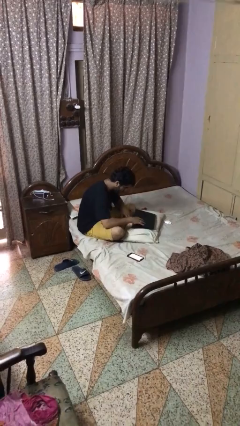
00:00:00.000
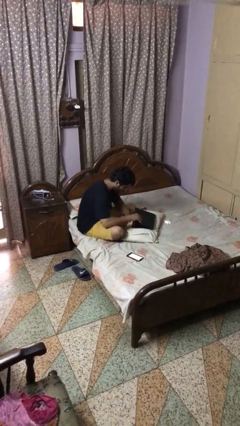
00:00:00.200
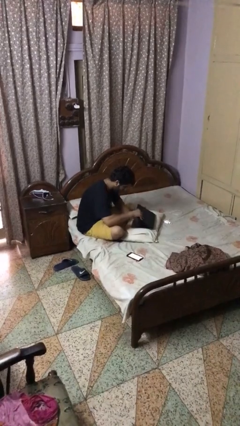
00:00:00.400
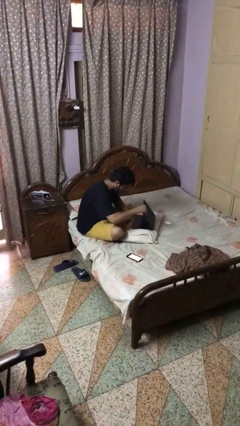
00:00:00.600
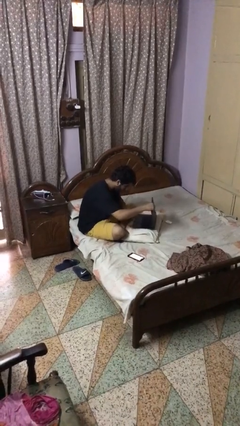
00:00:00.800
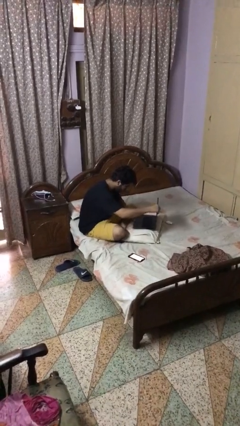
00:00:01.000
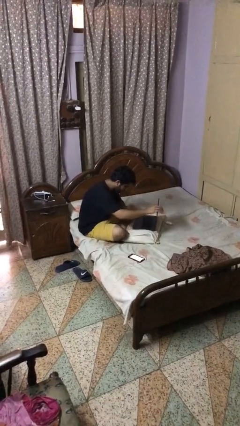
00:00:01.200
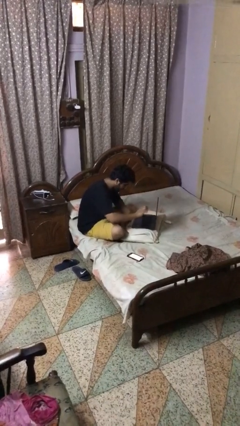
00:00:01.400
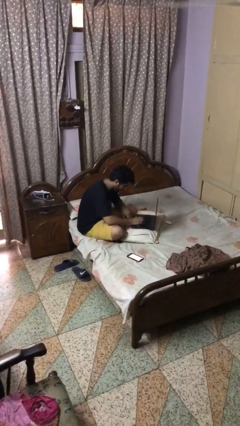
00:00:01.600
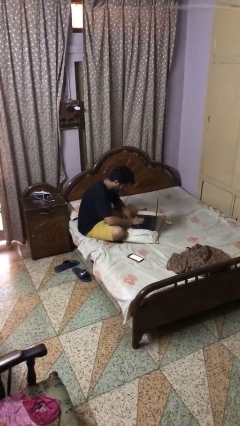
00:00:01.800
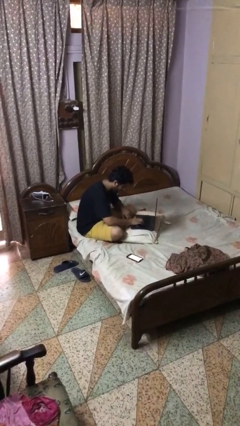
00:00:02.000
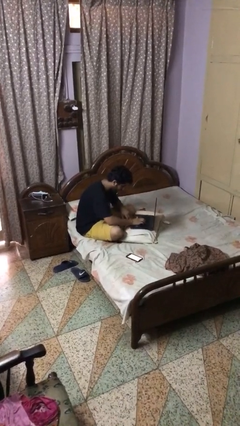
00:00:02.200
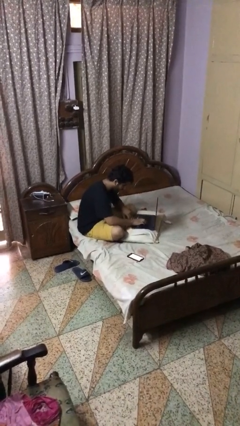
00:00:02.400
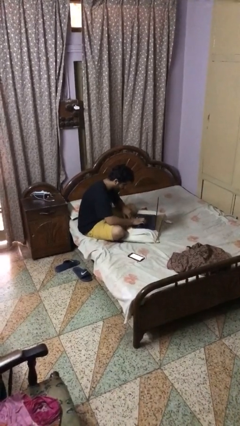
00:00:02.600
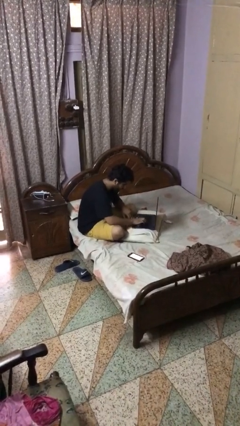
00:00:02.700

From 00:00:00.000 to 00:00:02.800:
person opens laptop

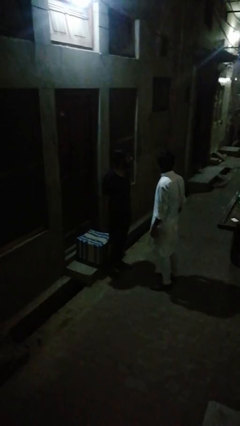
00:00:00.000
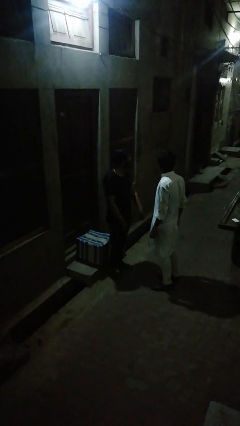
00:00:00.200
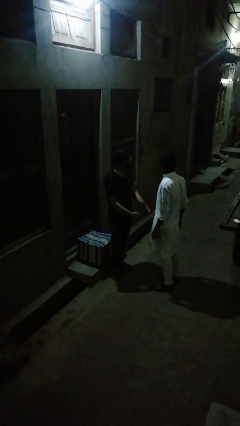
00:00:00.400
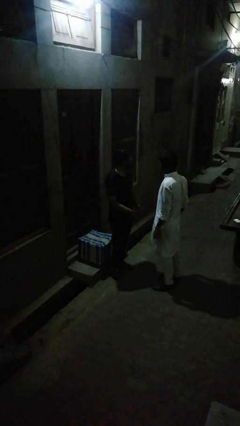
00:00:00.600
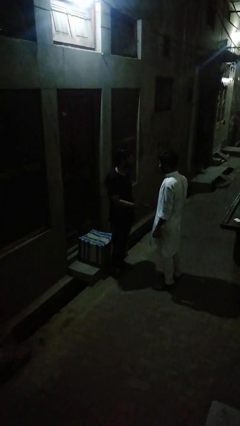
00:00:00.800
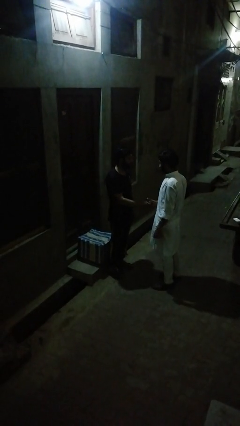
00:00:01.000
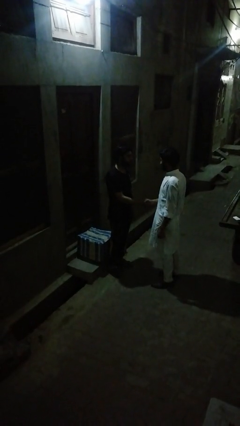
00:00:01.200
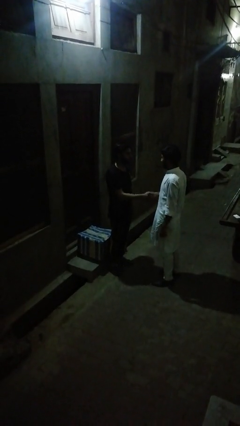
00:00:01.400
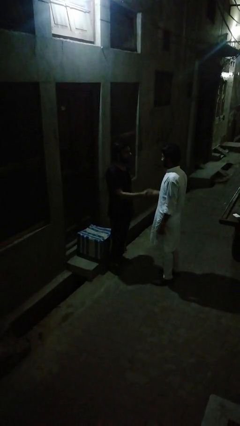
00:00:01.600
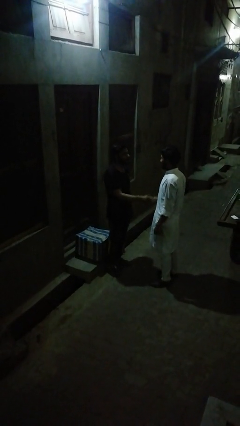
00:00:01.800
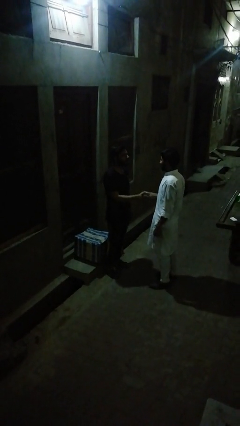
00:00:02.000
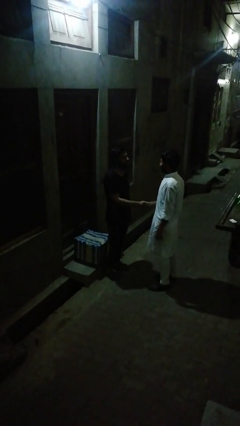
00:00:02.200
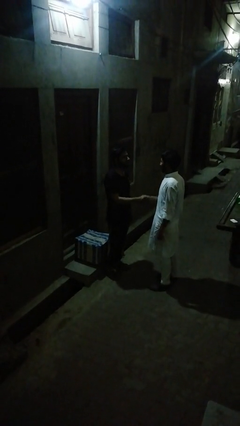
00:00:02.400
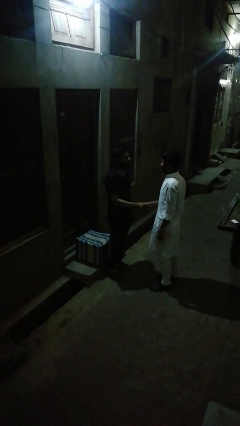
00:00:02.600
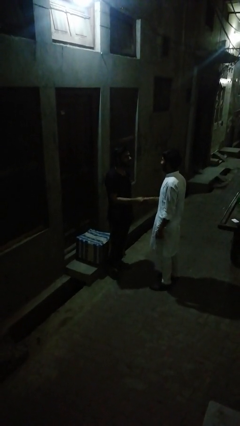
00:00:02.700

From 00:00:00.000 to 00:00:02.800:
person highfives hand

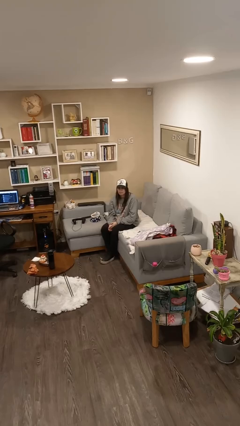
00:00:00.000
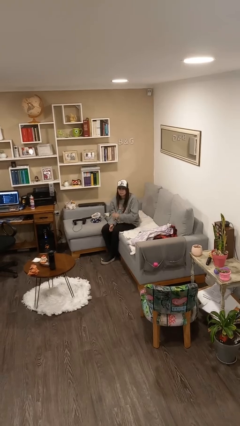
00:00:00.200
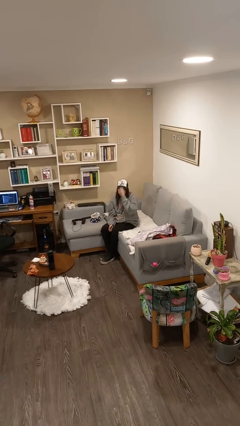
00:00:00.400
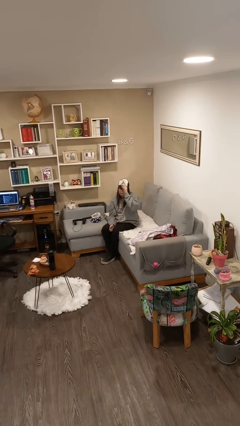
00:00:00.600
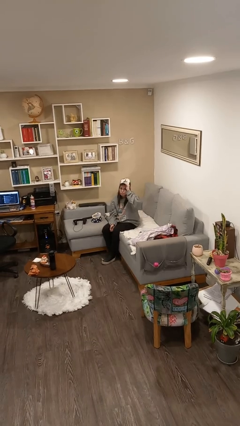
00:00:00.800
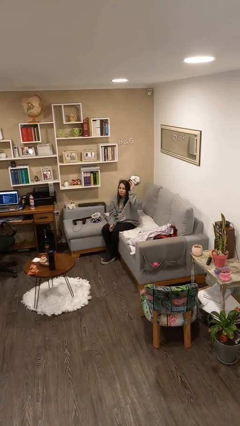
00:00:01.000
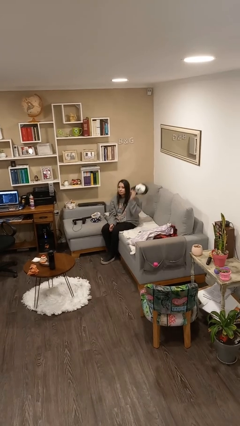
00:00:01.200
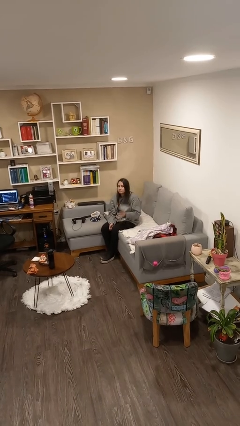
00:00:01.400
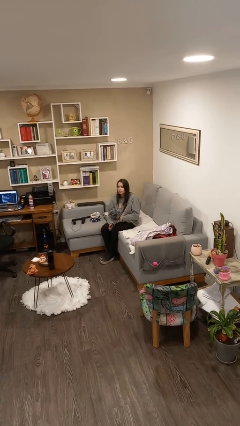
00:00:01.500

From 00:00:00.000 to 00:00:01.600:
person takes off hat

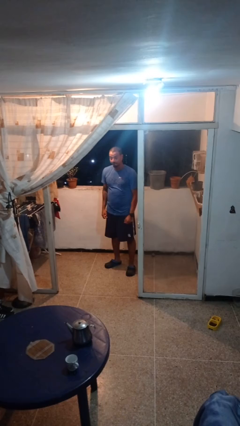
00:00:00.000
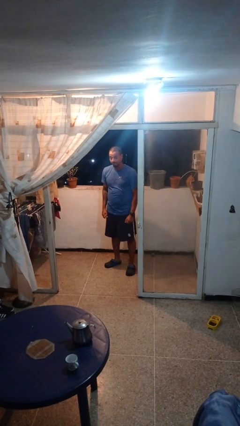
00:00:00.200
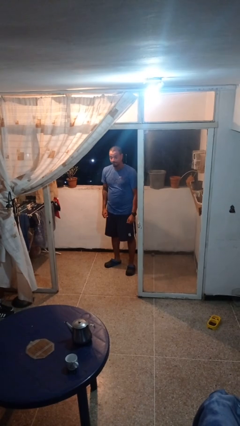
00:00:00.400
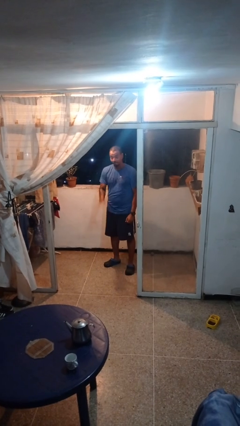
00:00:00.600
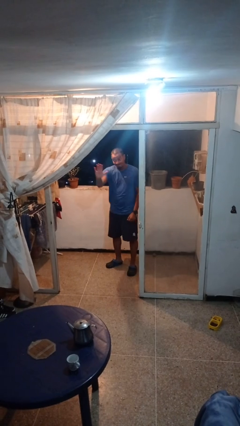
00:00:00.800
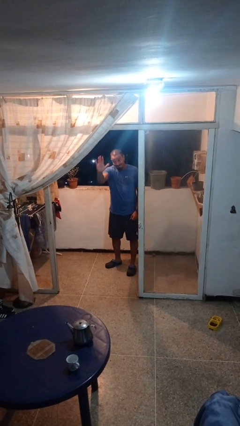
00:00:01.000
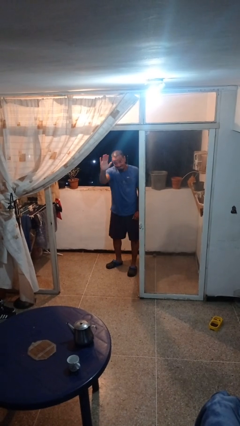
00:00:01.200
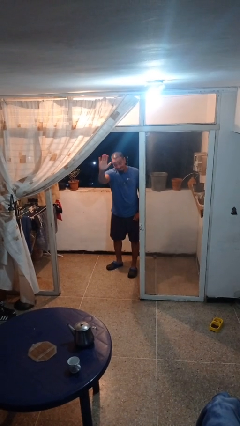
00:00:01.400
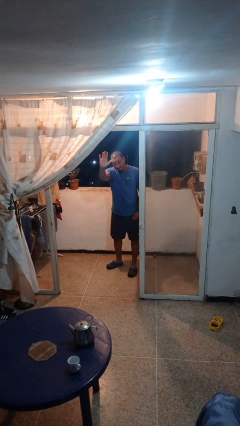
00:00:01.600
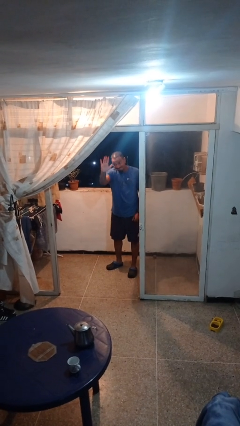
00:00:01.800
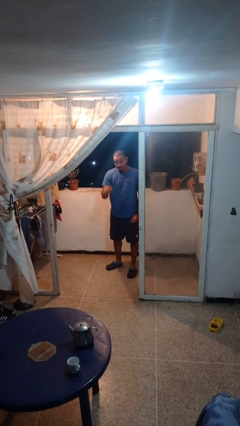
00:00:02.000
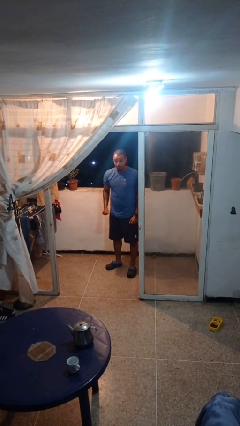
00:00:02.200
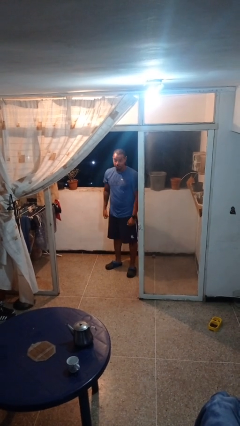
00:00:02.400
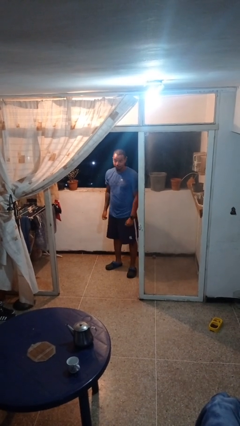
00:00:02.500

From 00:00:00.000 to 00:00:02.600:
person gestures stop

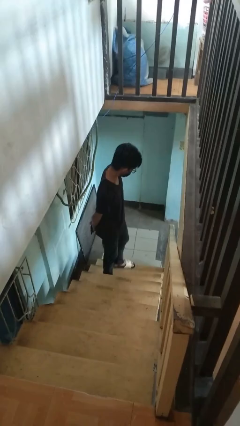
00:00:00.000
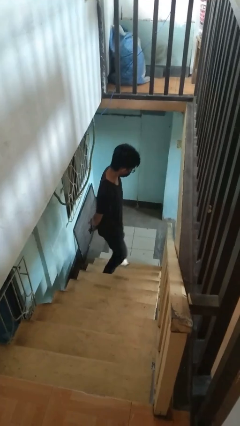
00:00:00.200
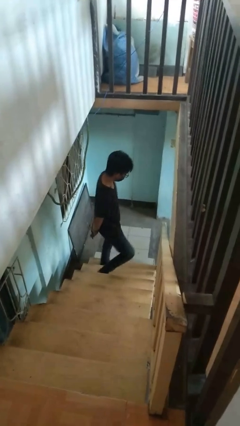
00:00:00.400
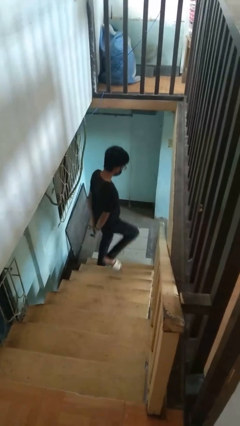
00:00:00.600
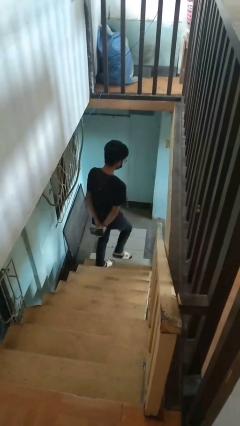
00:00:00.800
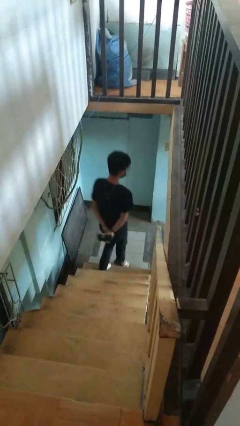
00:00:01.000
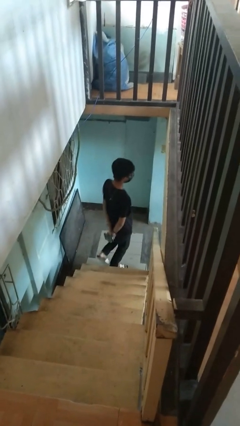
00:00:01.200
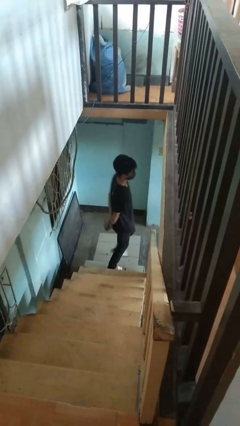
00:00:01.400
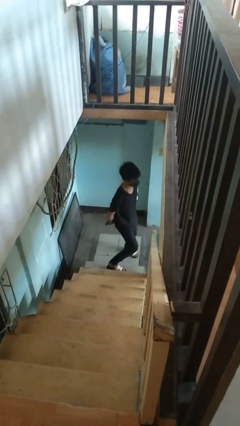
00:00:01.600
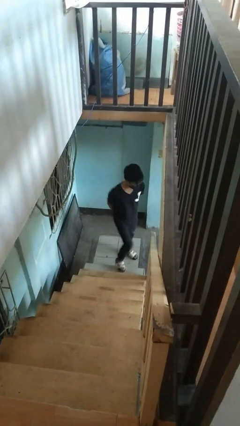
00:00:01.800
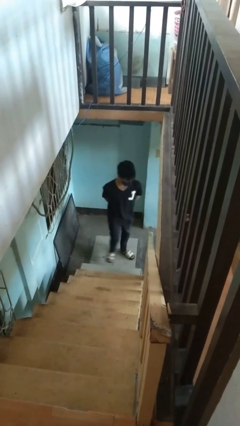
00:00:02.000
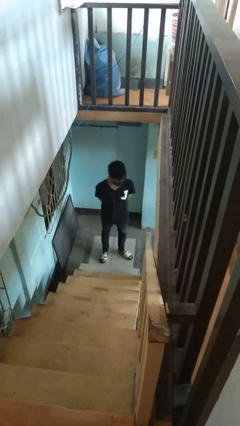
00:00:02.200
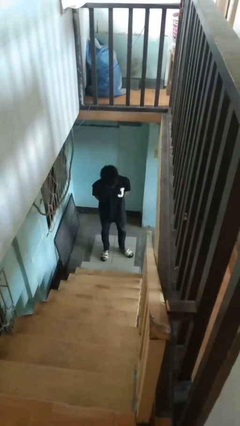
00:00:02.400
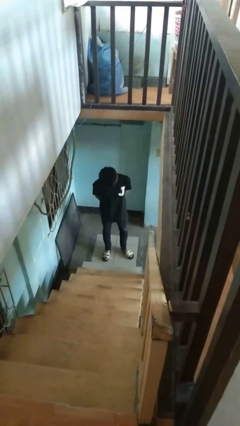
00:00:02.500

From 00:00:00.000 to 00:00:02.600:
person climbs down ladder

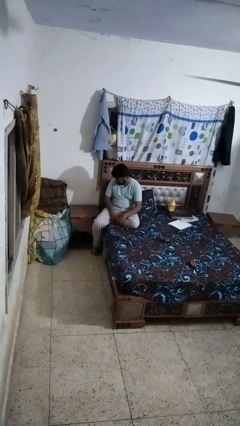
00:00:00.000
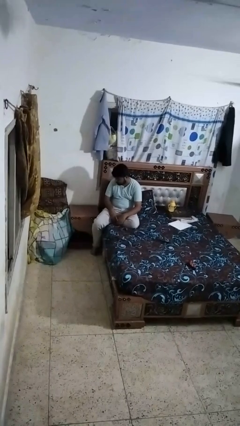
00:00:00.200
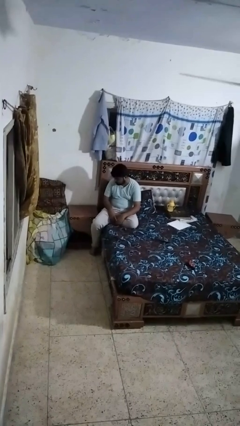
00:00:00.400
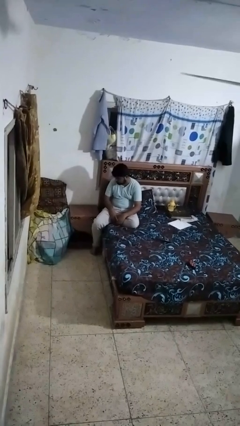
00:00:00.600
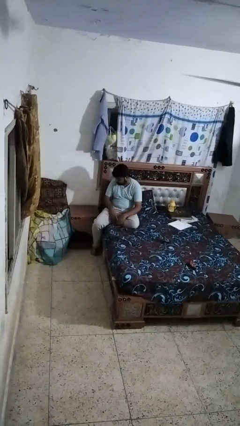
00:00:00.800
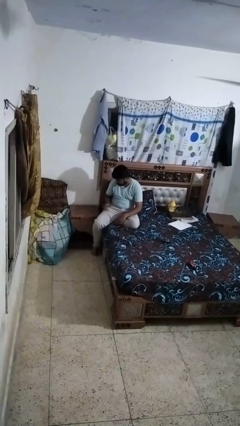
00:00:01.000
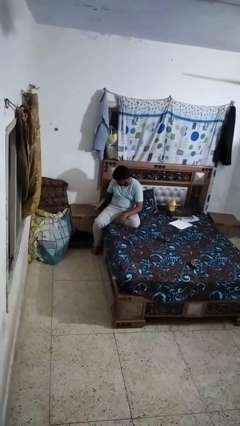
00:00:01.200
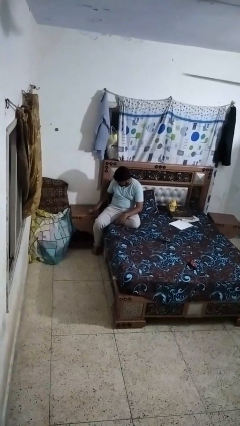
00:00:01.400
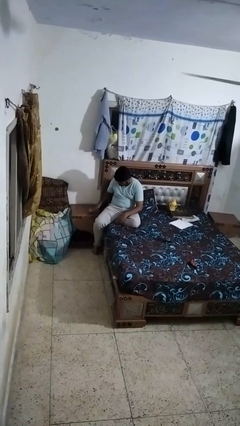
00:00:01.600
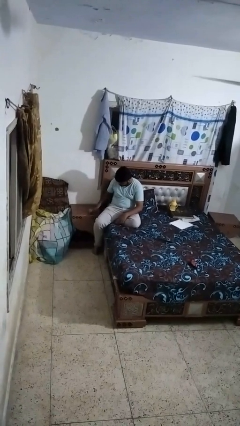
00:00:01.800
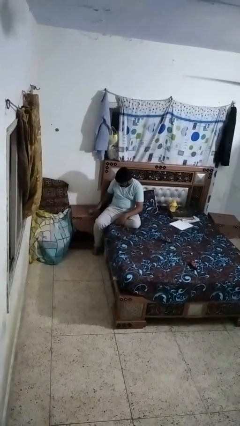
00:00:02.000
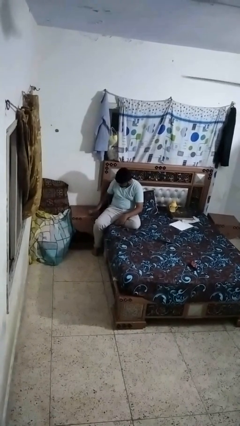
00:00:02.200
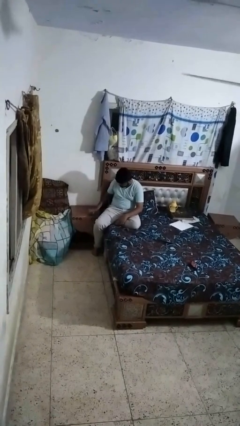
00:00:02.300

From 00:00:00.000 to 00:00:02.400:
person taps object with finger

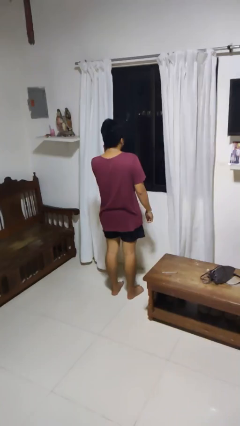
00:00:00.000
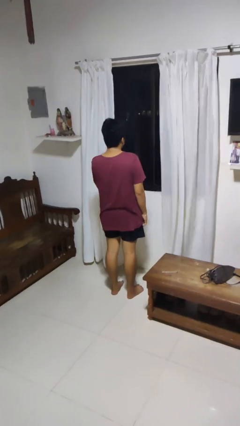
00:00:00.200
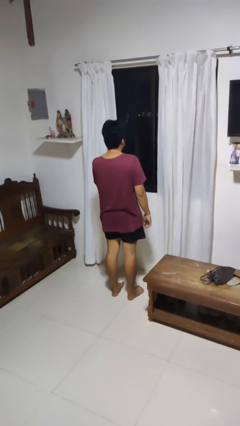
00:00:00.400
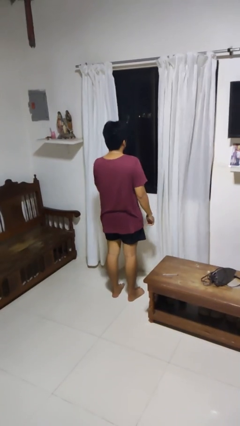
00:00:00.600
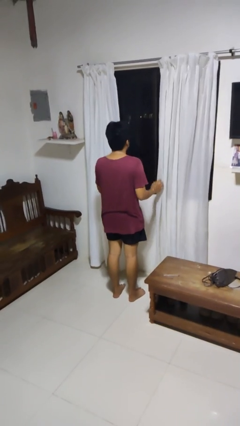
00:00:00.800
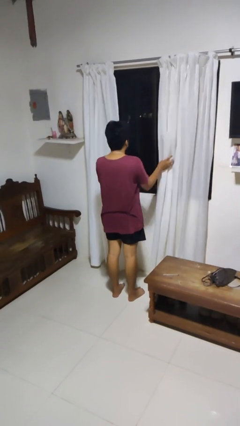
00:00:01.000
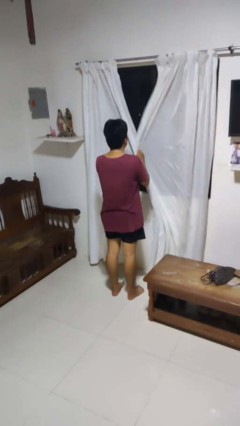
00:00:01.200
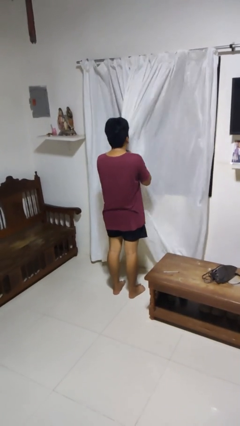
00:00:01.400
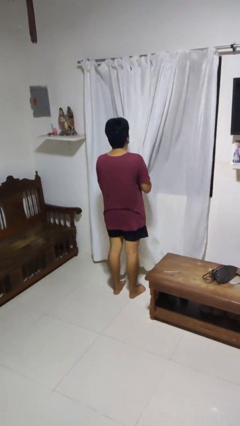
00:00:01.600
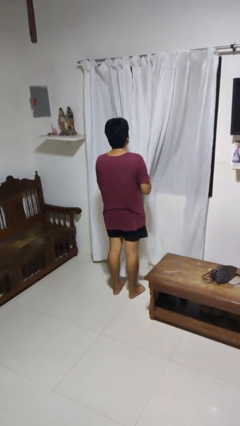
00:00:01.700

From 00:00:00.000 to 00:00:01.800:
person closes curtains

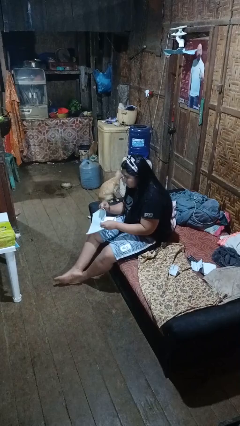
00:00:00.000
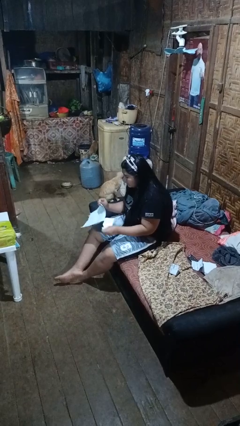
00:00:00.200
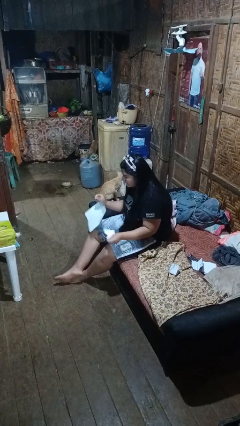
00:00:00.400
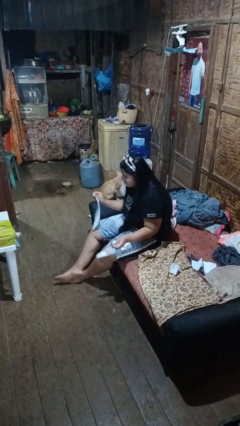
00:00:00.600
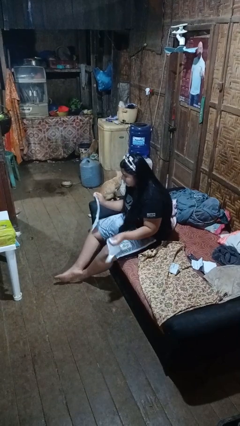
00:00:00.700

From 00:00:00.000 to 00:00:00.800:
person tears paper
